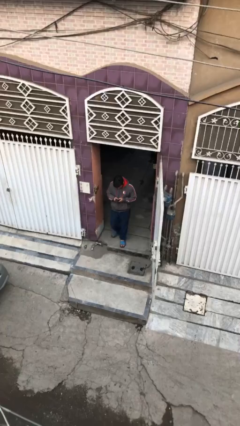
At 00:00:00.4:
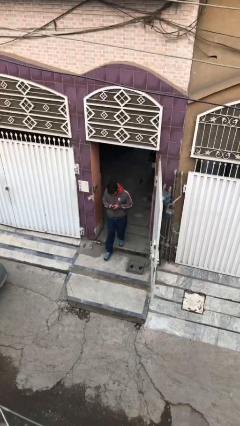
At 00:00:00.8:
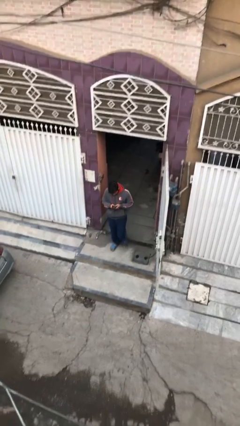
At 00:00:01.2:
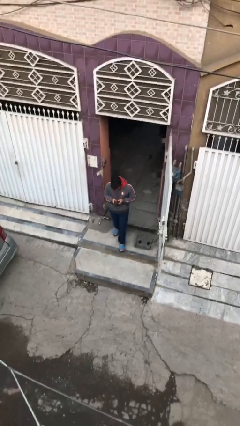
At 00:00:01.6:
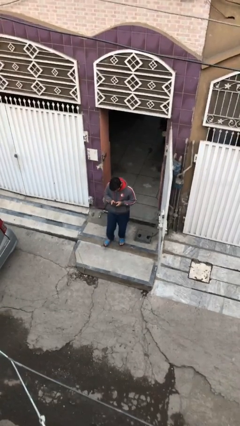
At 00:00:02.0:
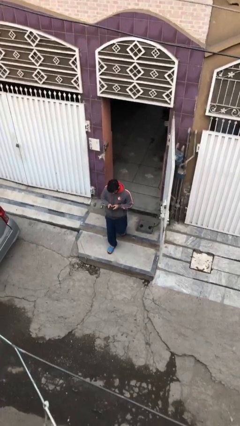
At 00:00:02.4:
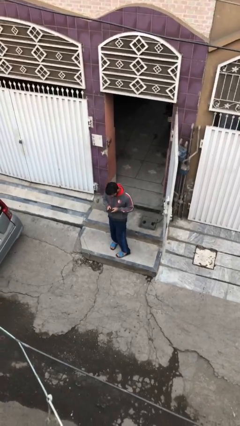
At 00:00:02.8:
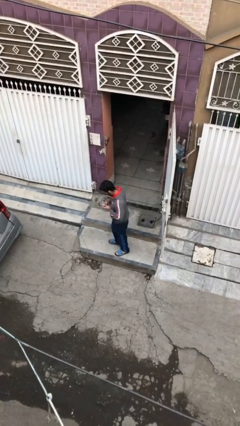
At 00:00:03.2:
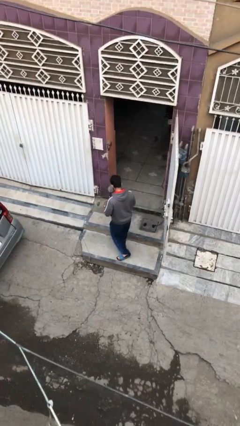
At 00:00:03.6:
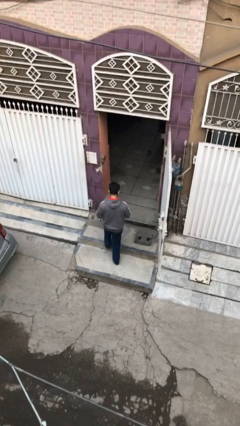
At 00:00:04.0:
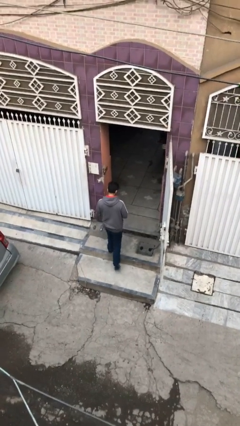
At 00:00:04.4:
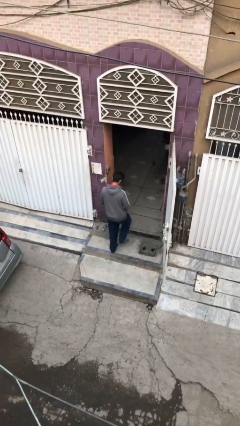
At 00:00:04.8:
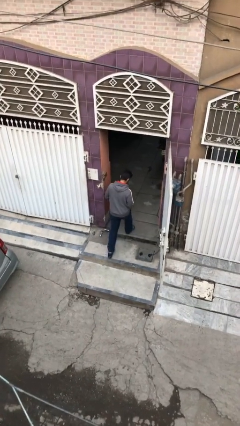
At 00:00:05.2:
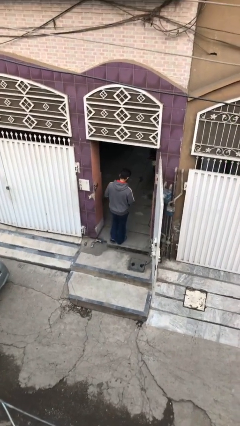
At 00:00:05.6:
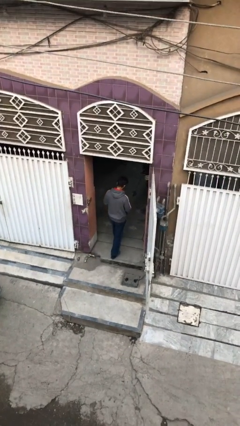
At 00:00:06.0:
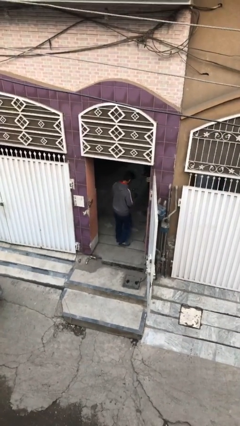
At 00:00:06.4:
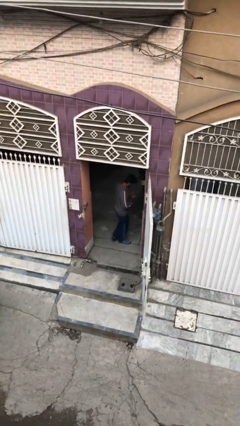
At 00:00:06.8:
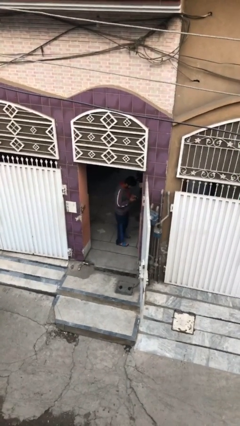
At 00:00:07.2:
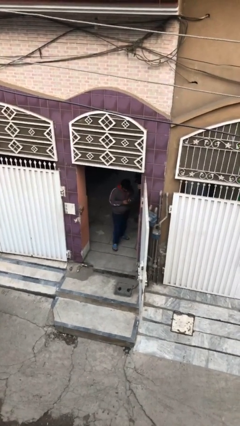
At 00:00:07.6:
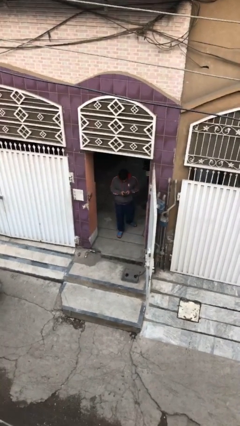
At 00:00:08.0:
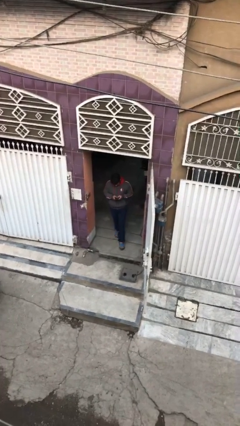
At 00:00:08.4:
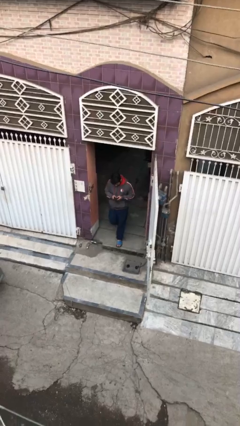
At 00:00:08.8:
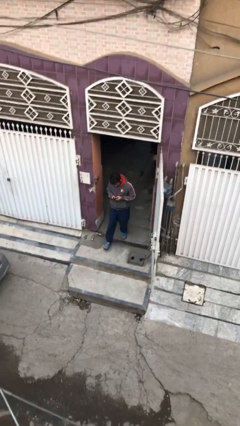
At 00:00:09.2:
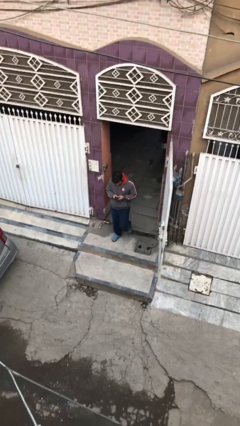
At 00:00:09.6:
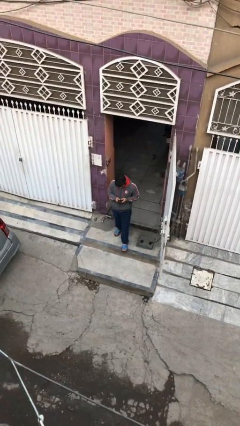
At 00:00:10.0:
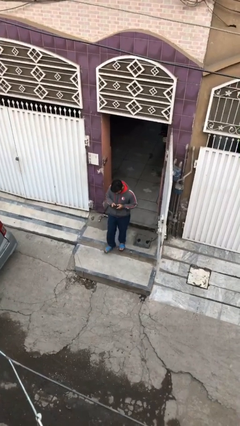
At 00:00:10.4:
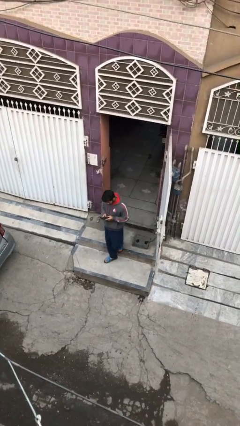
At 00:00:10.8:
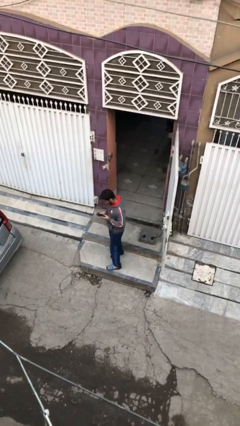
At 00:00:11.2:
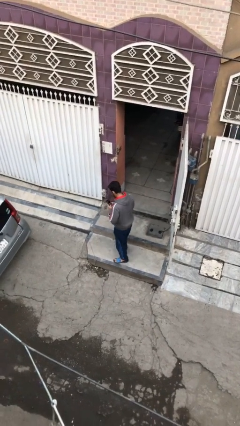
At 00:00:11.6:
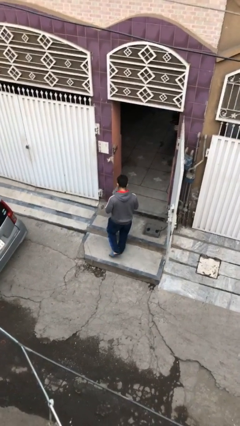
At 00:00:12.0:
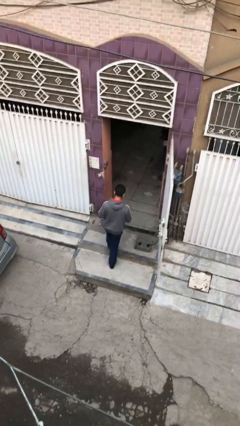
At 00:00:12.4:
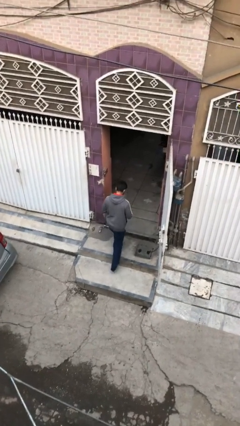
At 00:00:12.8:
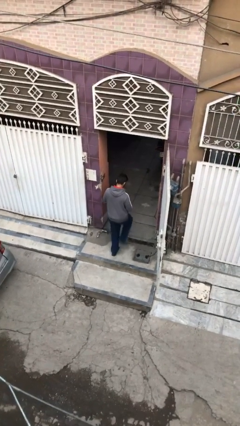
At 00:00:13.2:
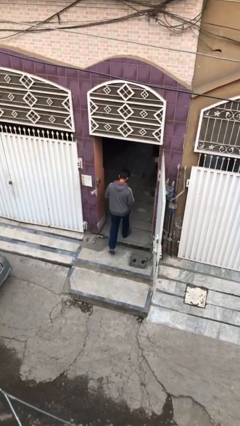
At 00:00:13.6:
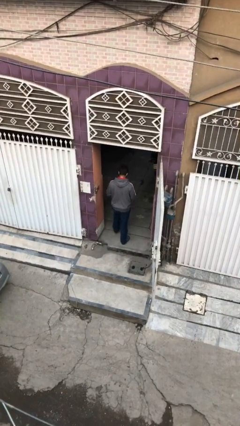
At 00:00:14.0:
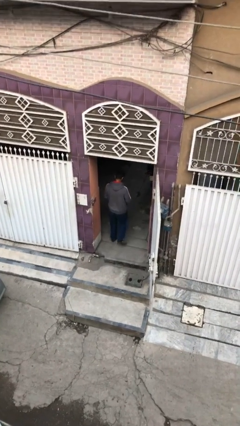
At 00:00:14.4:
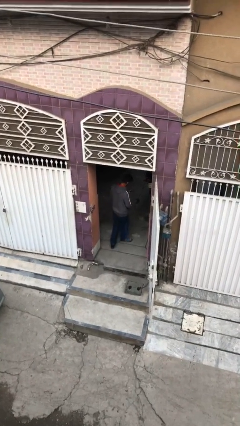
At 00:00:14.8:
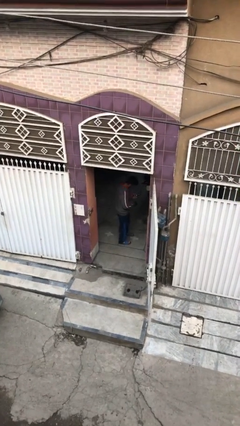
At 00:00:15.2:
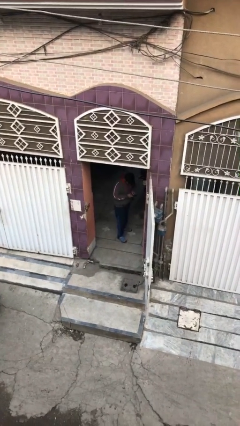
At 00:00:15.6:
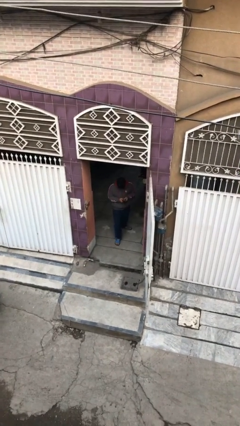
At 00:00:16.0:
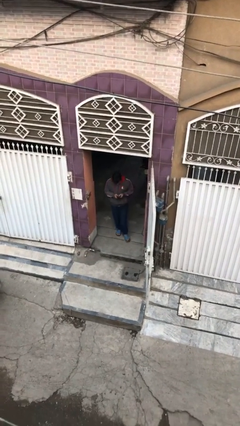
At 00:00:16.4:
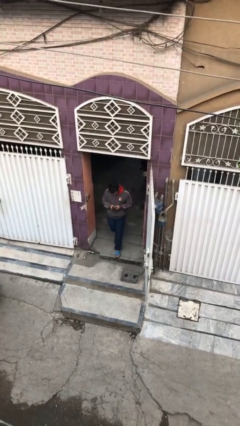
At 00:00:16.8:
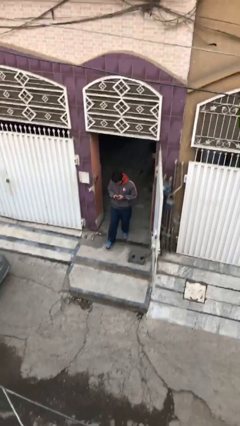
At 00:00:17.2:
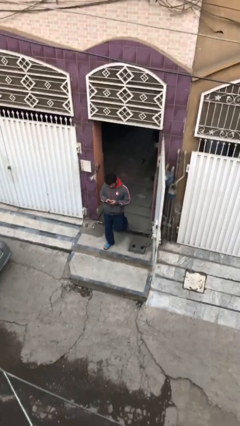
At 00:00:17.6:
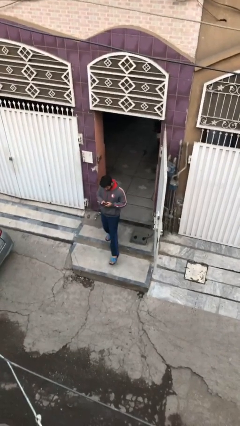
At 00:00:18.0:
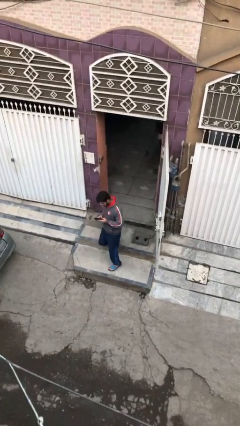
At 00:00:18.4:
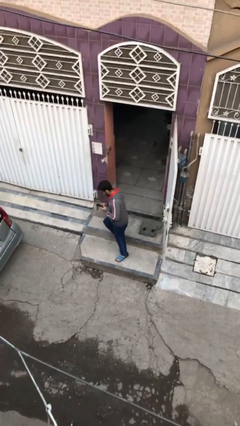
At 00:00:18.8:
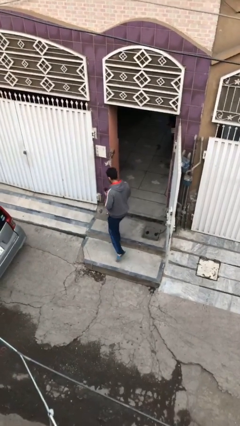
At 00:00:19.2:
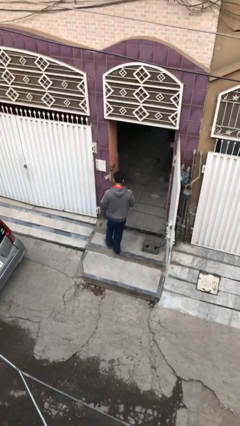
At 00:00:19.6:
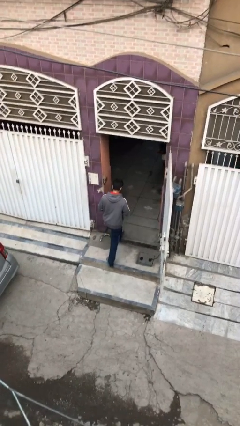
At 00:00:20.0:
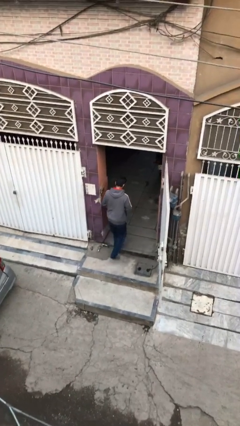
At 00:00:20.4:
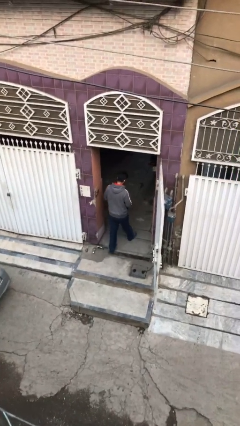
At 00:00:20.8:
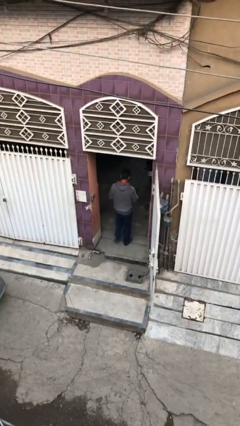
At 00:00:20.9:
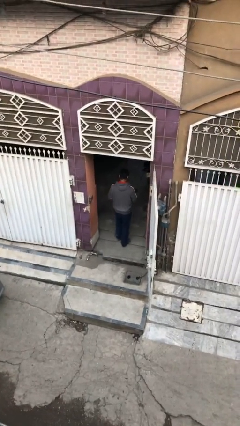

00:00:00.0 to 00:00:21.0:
person texts on phone

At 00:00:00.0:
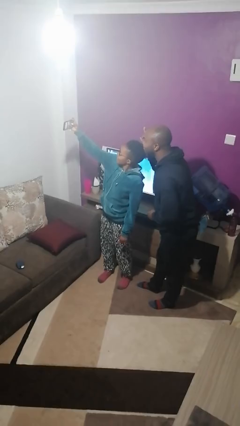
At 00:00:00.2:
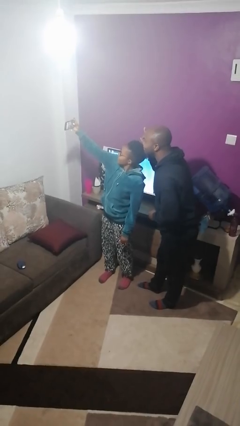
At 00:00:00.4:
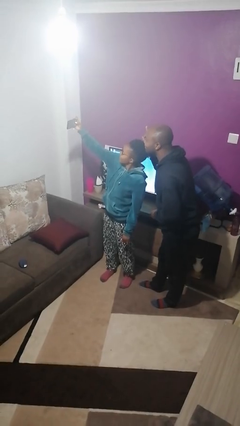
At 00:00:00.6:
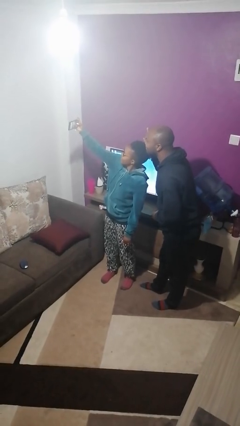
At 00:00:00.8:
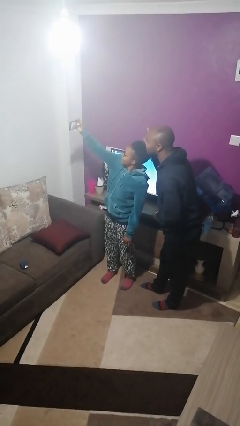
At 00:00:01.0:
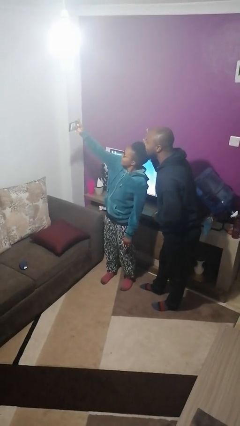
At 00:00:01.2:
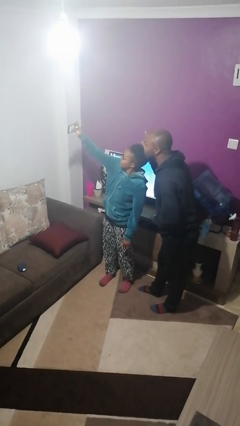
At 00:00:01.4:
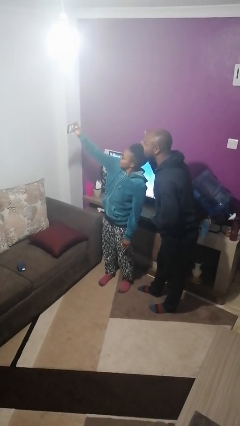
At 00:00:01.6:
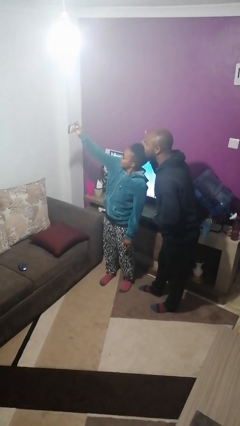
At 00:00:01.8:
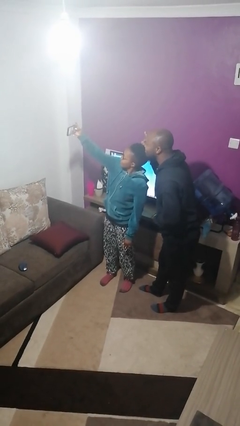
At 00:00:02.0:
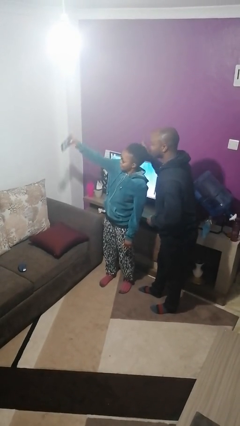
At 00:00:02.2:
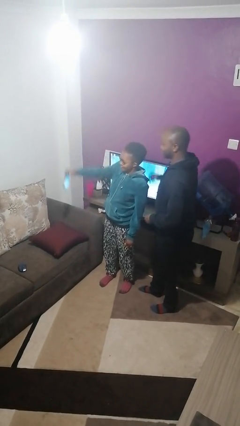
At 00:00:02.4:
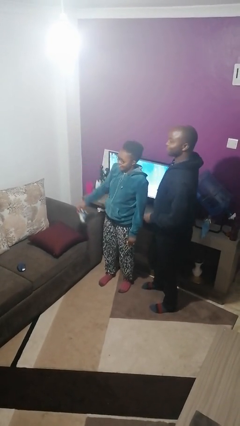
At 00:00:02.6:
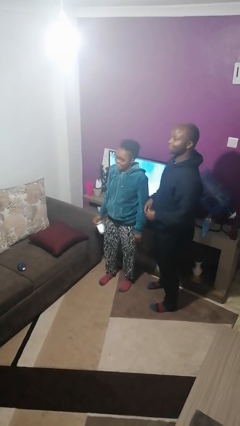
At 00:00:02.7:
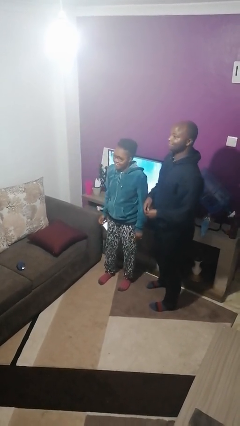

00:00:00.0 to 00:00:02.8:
person takes selfie with person

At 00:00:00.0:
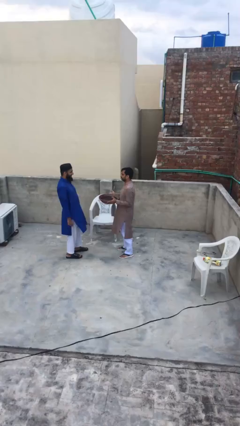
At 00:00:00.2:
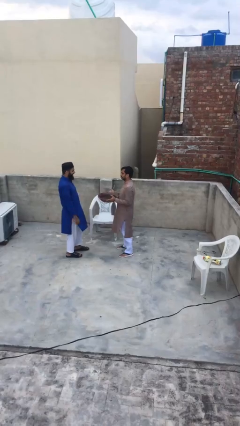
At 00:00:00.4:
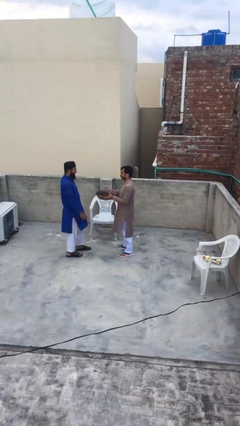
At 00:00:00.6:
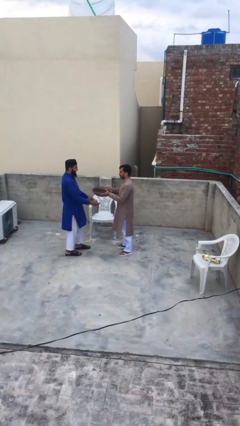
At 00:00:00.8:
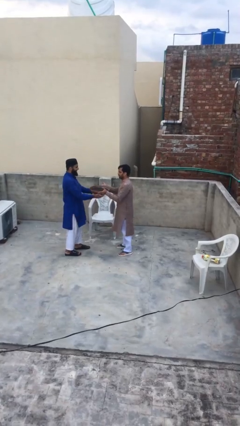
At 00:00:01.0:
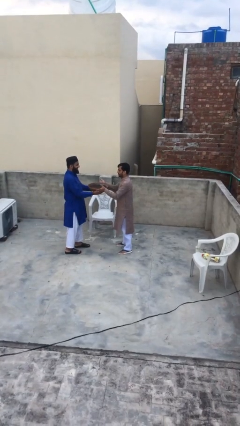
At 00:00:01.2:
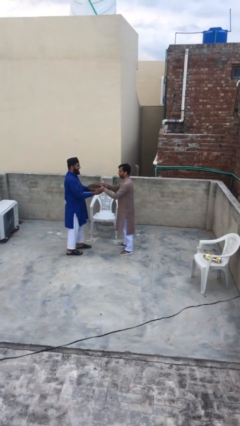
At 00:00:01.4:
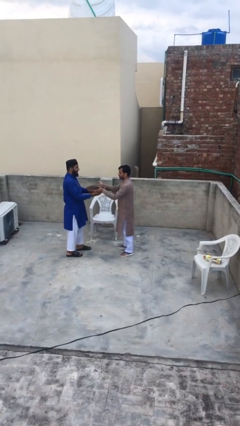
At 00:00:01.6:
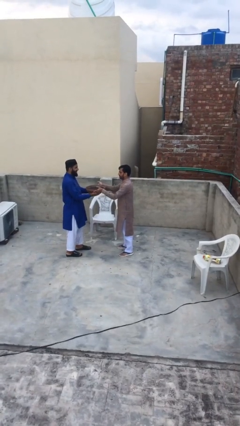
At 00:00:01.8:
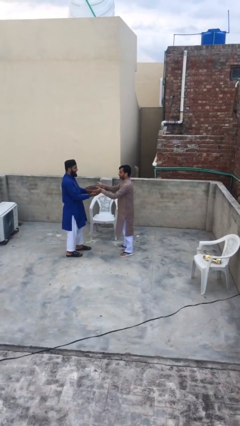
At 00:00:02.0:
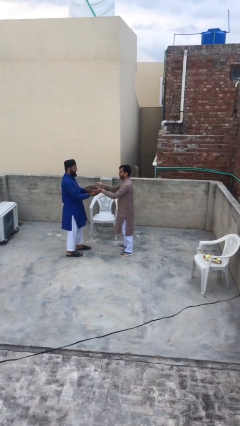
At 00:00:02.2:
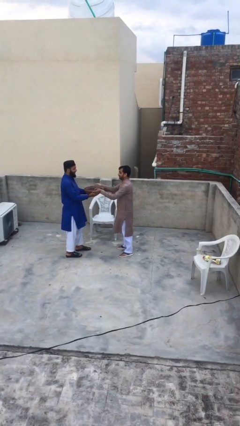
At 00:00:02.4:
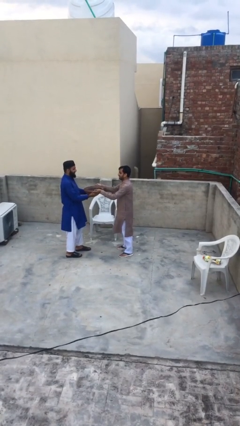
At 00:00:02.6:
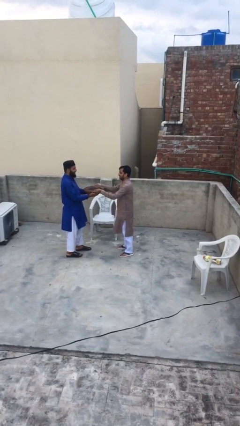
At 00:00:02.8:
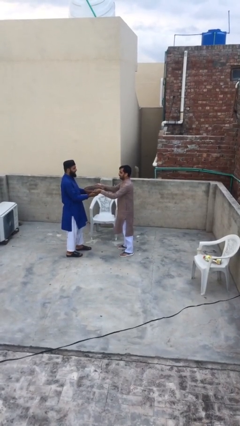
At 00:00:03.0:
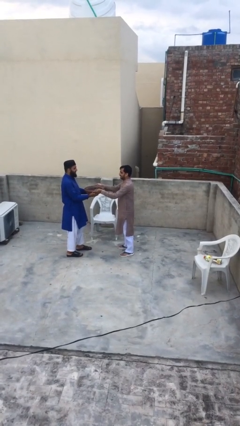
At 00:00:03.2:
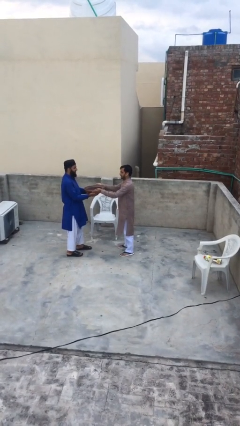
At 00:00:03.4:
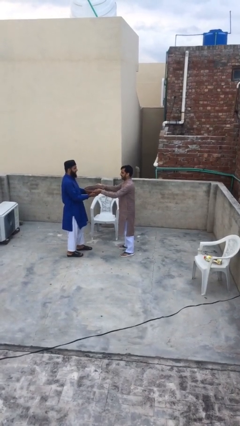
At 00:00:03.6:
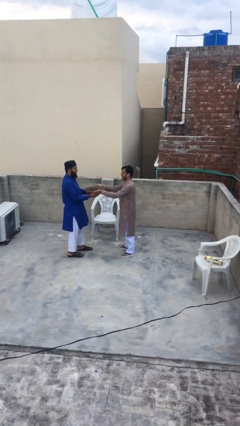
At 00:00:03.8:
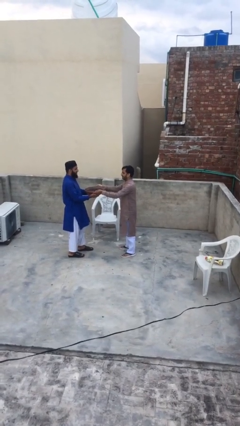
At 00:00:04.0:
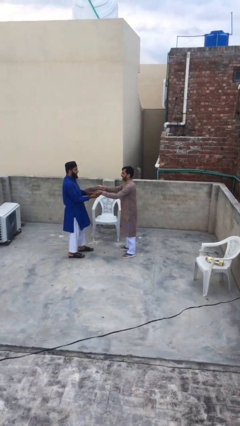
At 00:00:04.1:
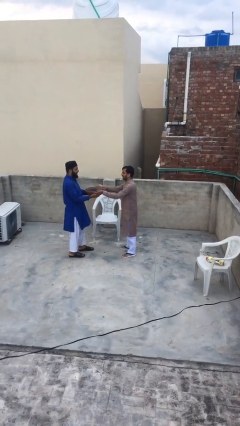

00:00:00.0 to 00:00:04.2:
person transfers object to person
